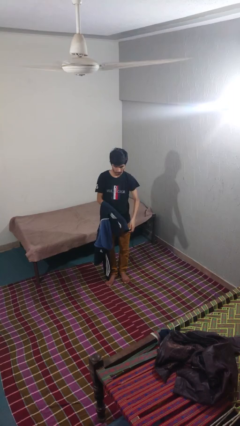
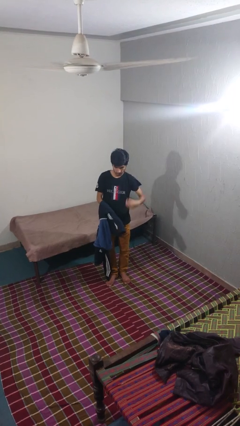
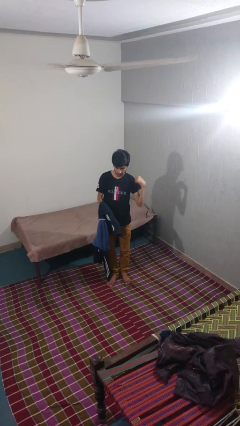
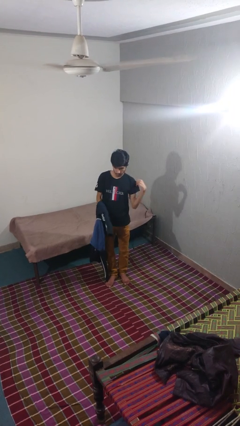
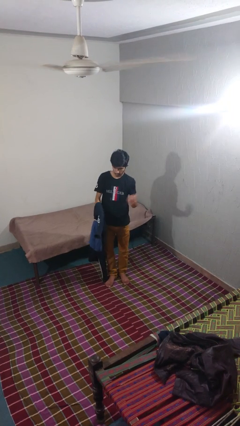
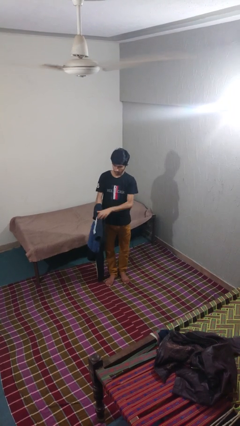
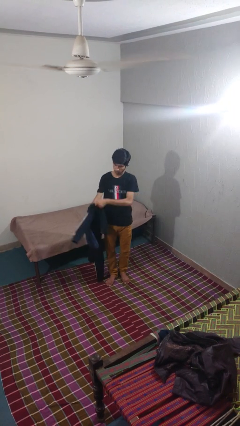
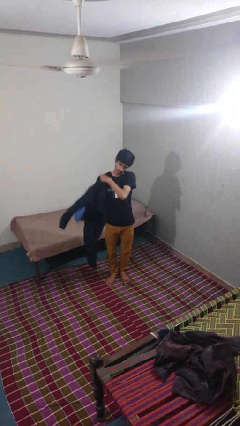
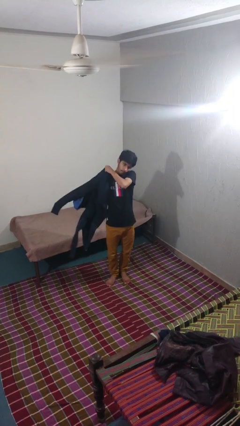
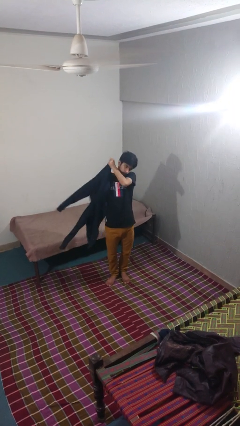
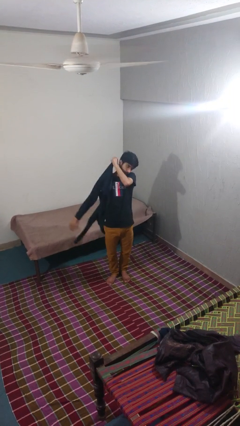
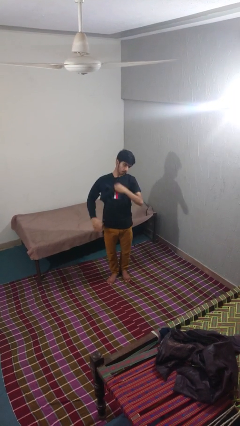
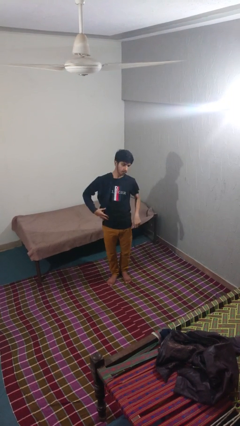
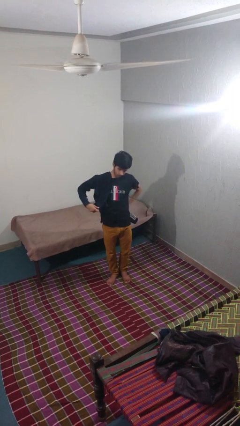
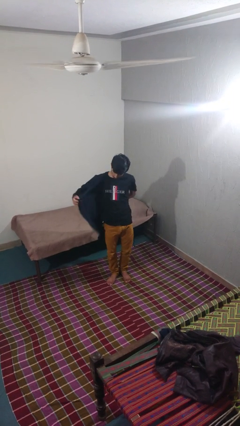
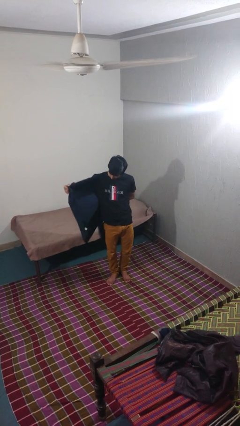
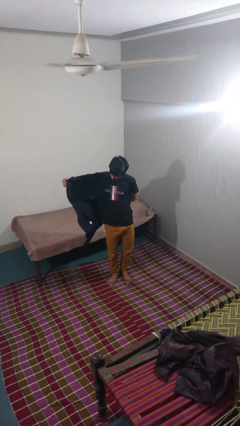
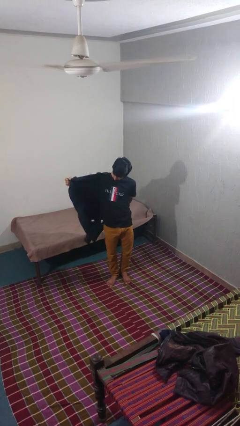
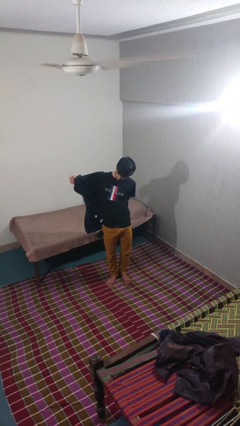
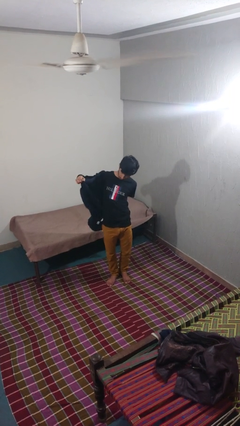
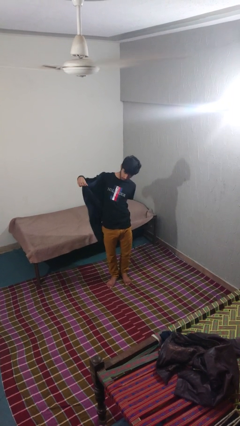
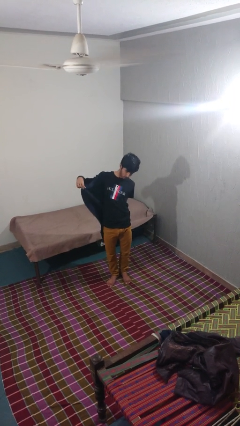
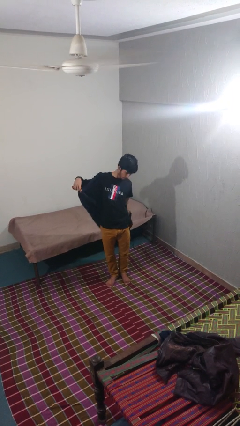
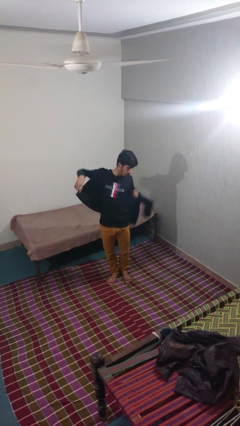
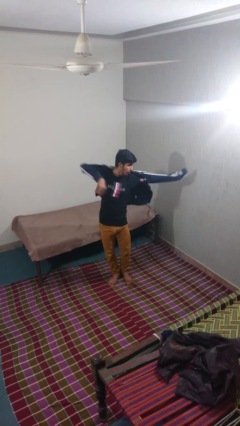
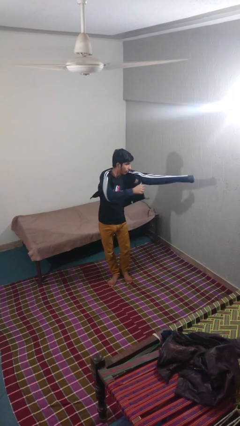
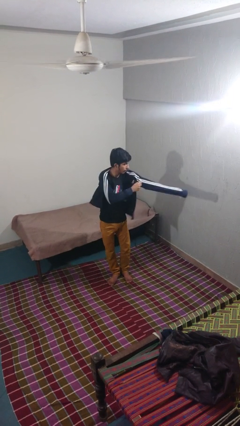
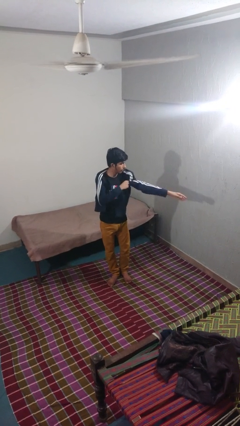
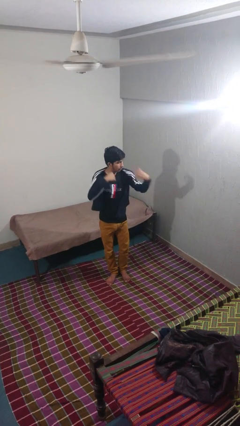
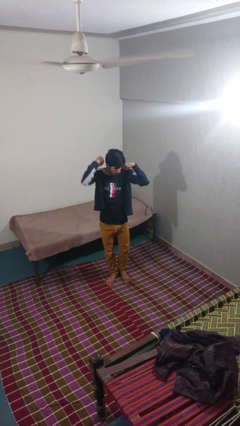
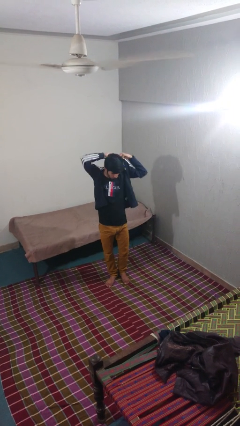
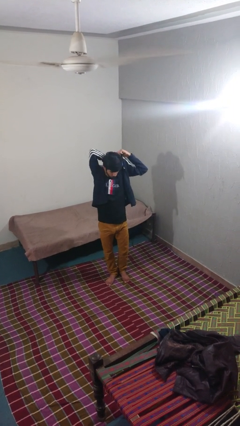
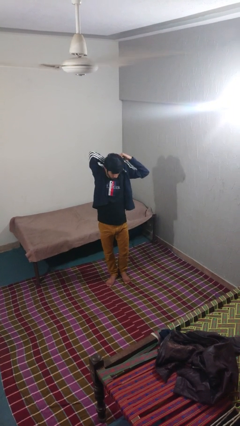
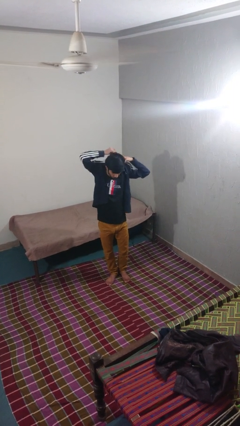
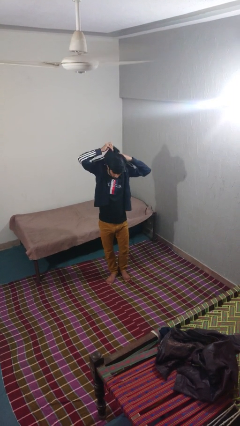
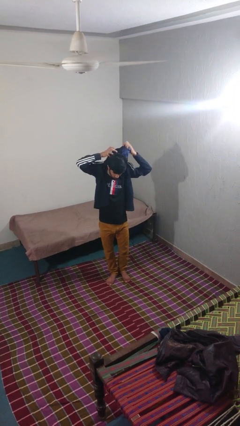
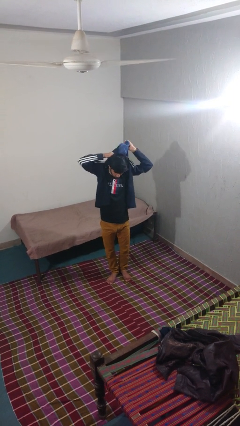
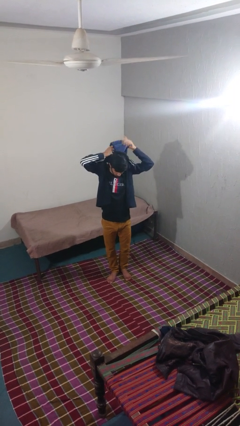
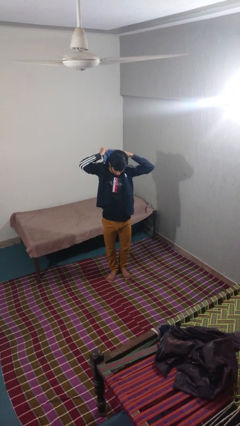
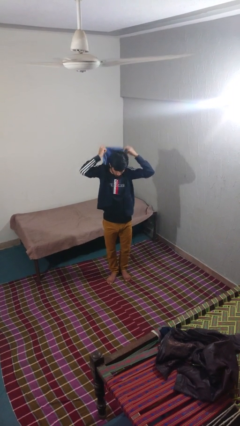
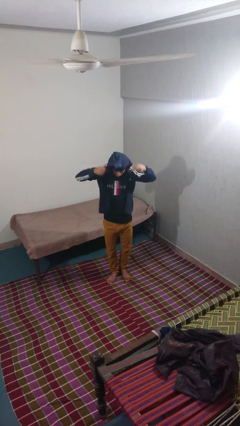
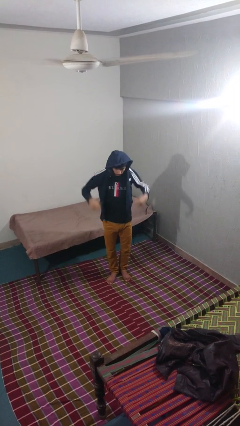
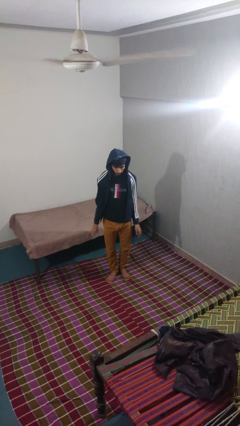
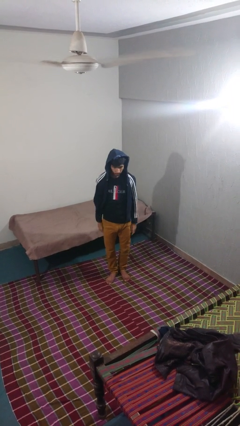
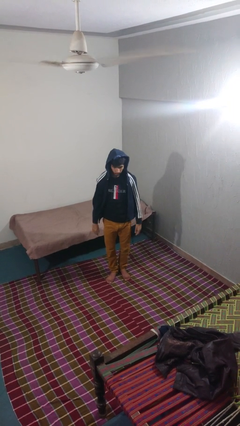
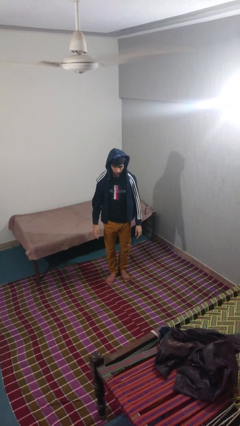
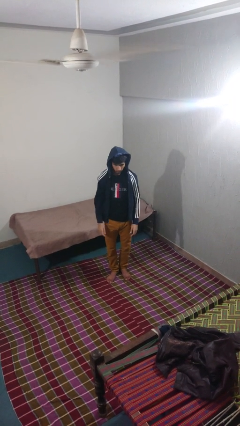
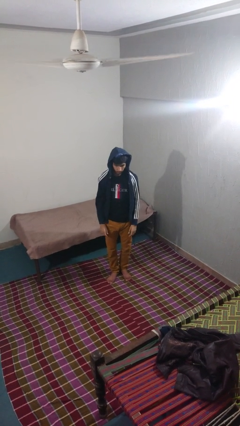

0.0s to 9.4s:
person puts on hoodie

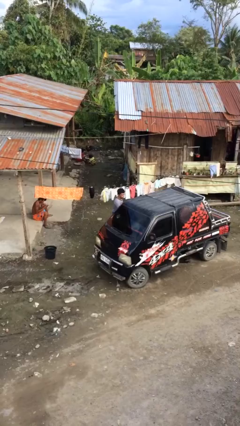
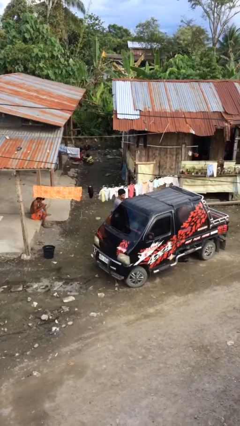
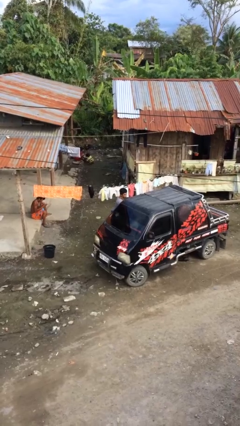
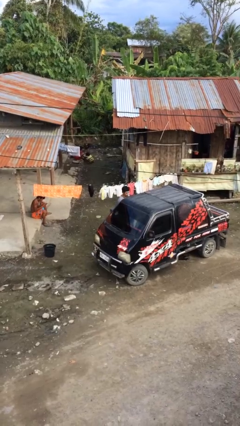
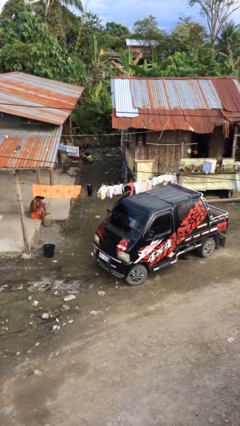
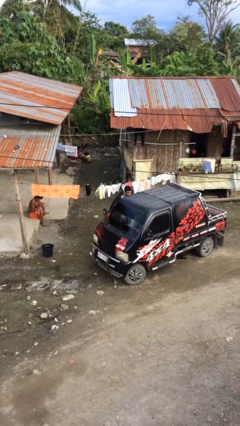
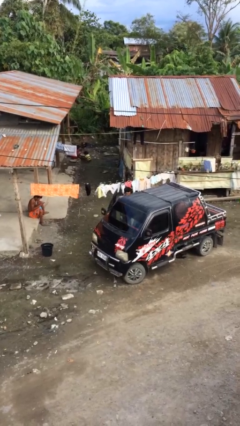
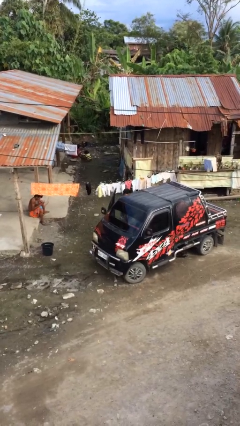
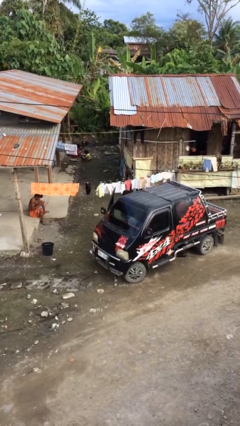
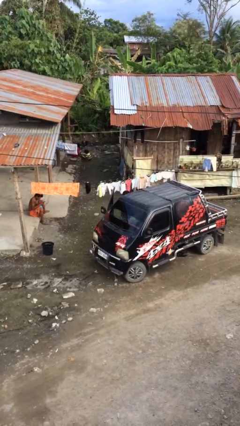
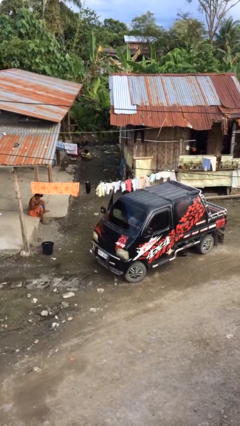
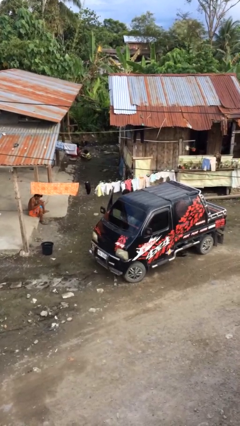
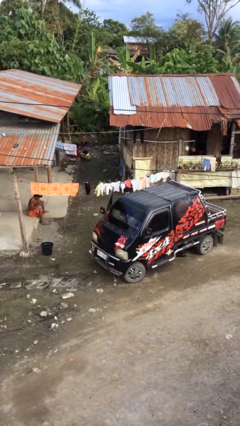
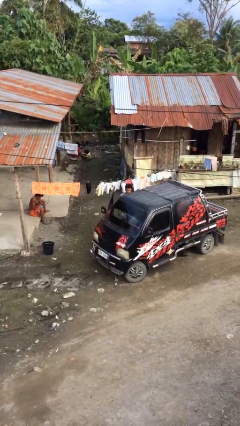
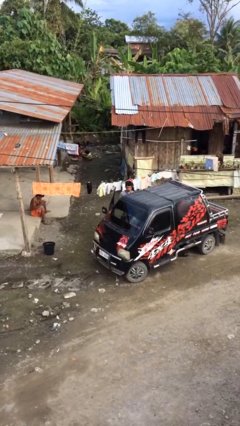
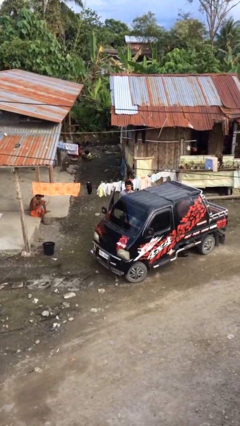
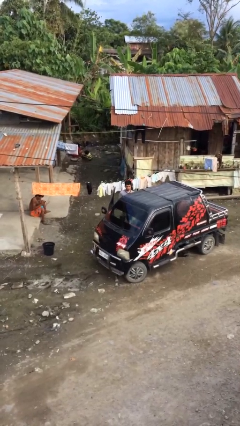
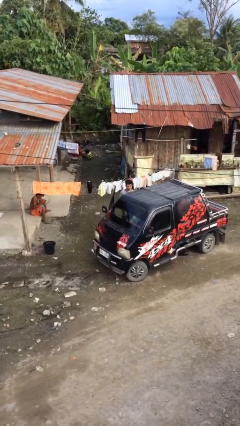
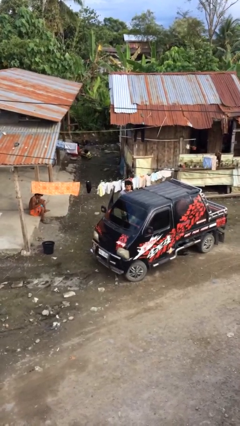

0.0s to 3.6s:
person loads car

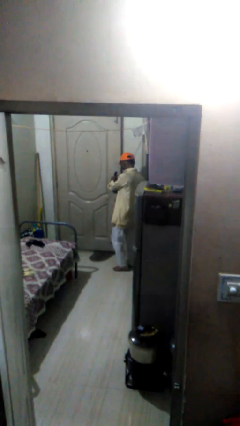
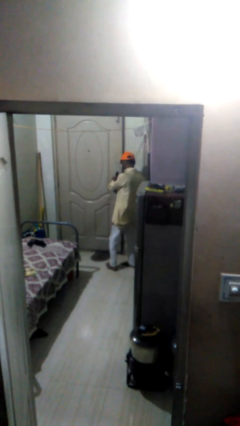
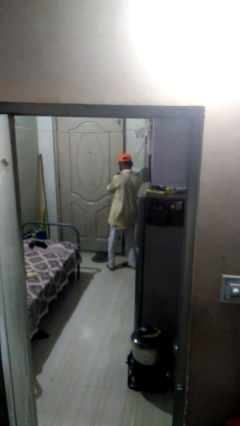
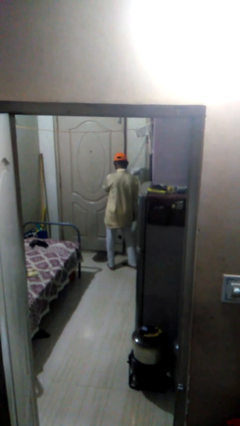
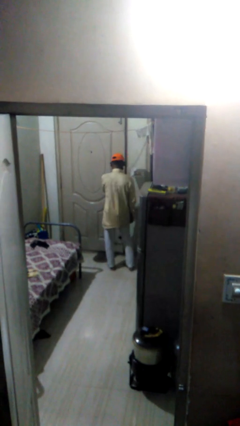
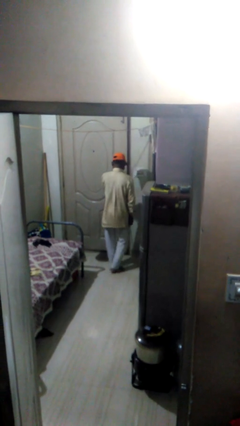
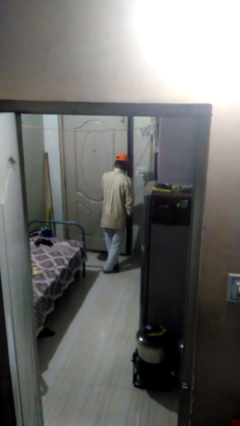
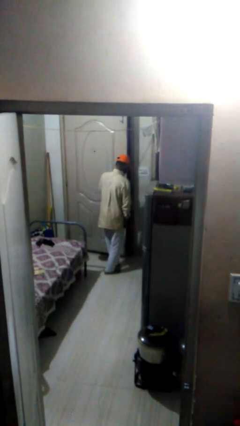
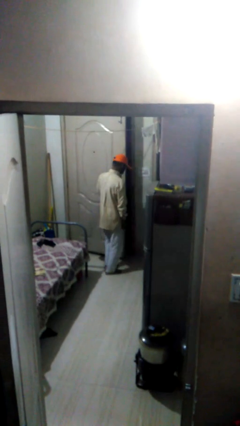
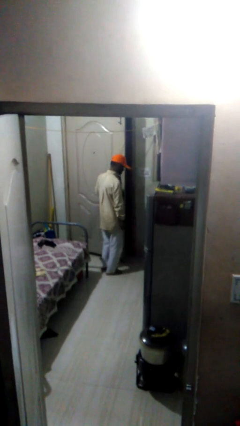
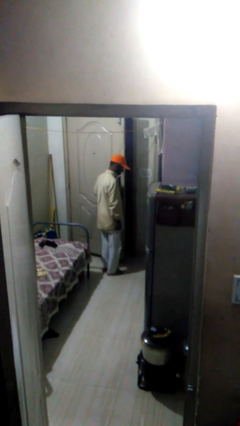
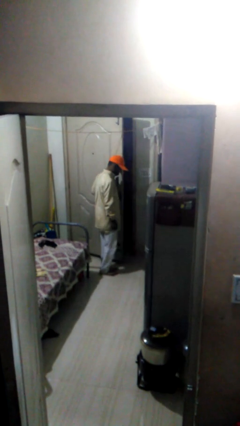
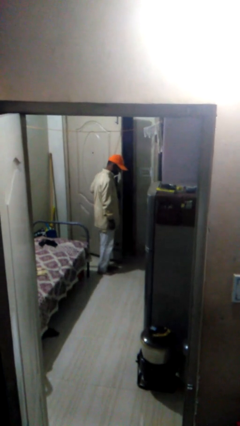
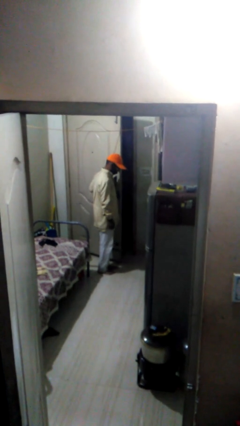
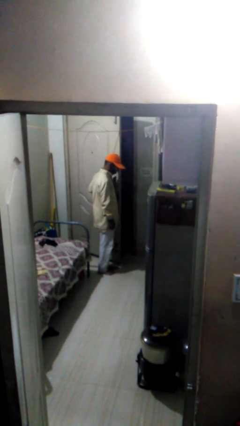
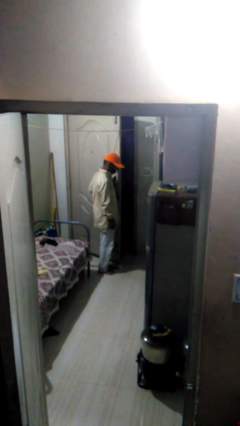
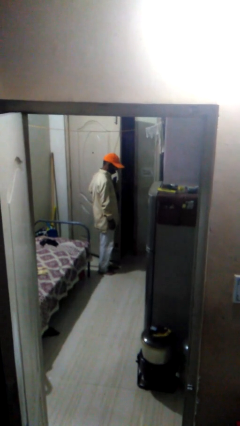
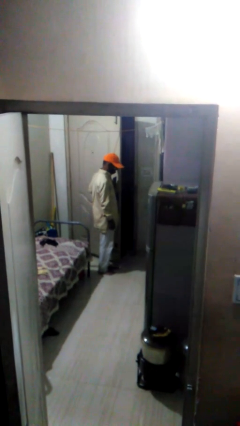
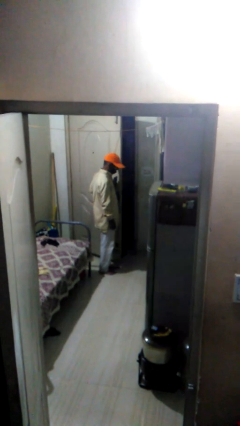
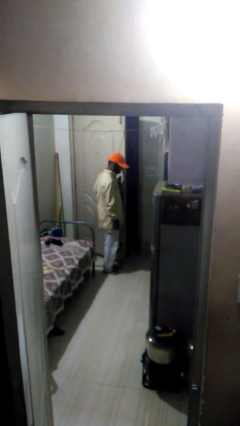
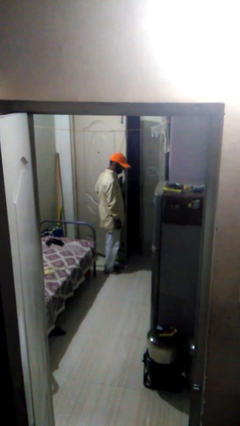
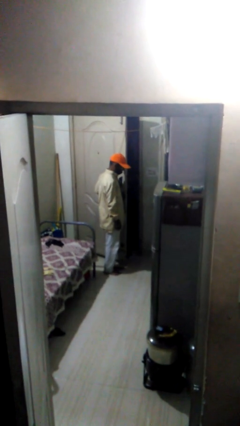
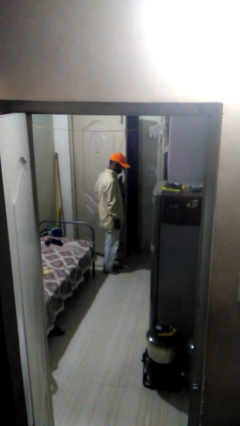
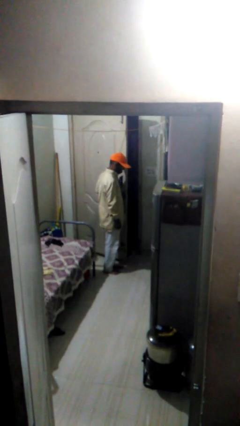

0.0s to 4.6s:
person opens facility door

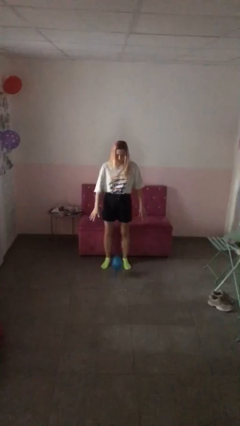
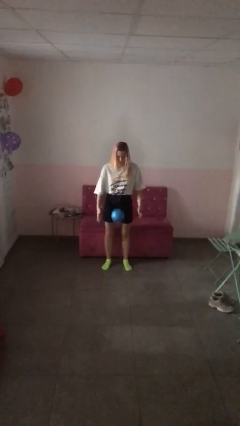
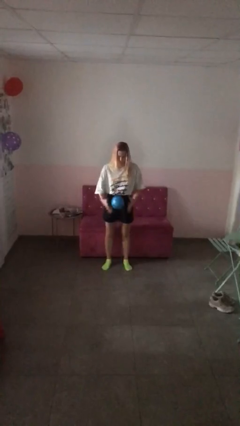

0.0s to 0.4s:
person bounces ball on floor
